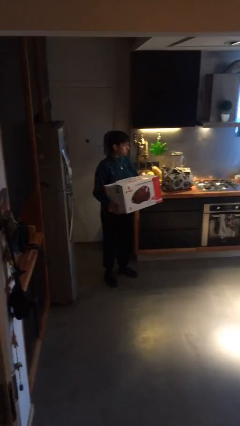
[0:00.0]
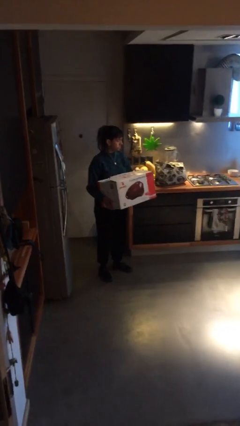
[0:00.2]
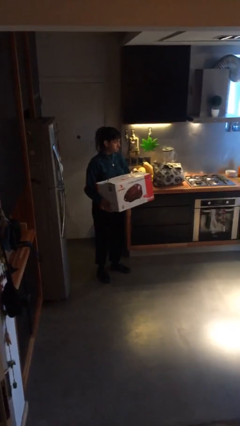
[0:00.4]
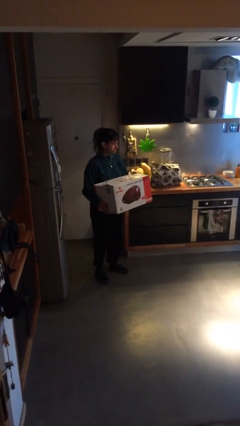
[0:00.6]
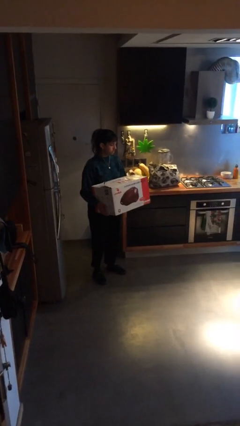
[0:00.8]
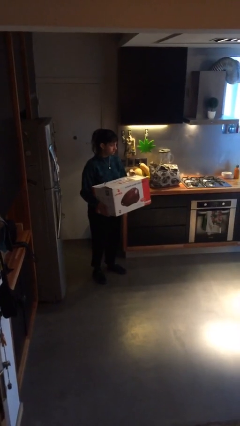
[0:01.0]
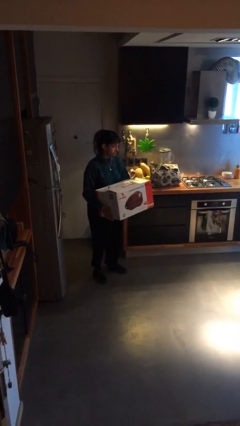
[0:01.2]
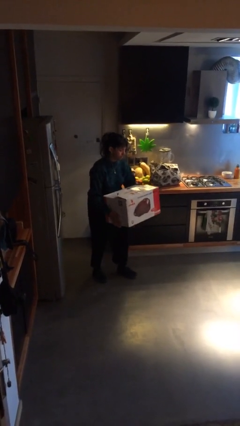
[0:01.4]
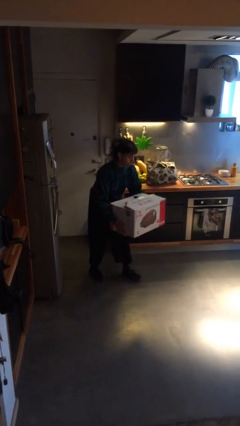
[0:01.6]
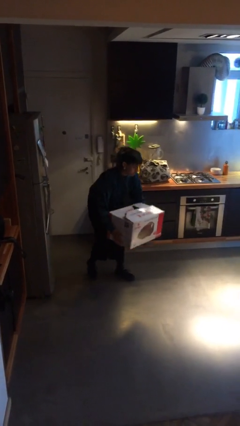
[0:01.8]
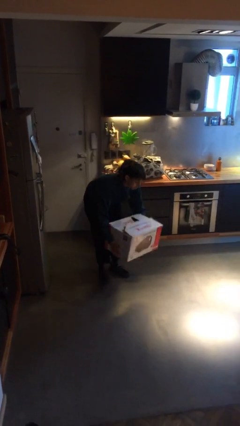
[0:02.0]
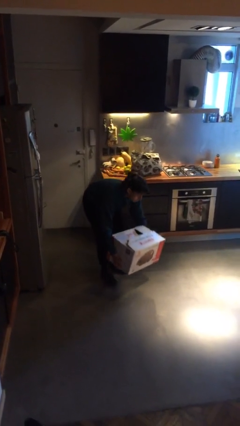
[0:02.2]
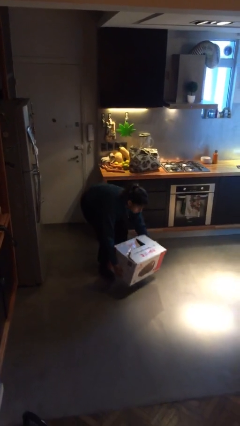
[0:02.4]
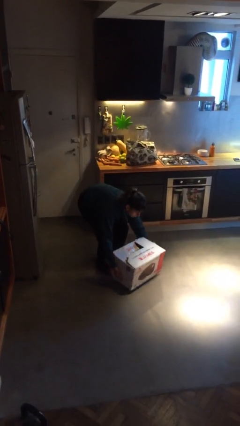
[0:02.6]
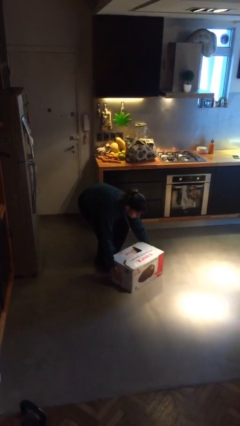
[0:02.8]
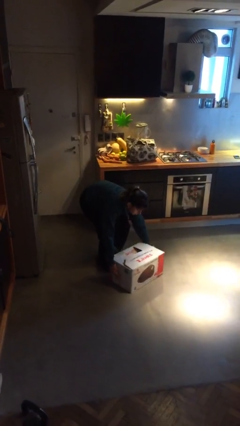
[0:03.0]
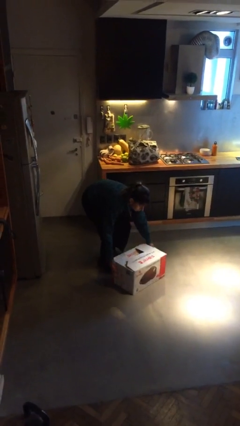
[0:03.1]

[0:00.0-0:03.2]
person puts down object on floor

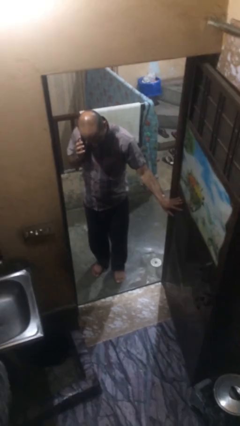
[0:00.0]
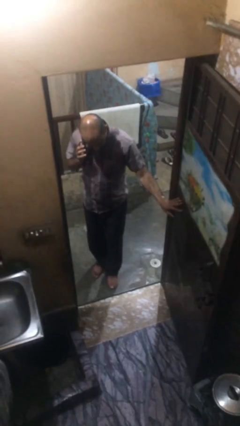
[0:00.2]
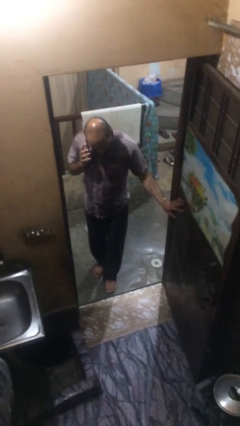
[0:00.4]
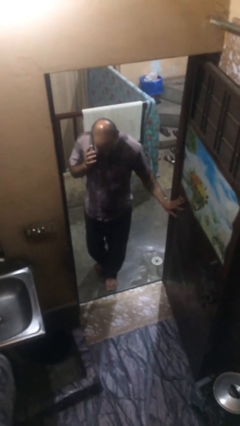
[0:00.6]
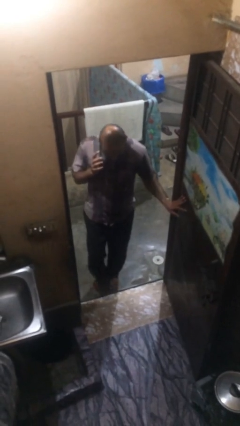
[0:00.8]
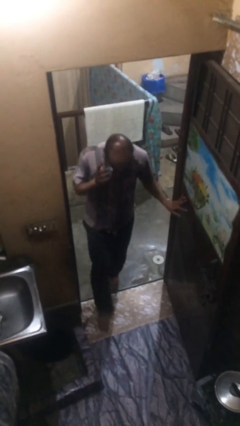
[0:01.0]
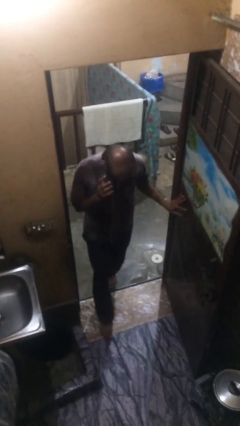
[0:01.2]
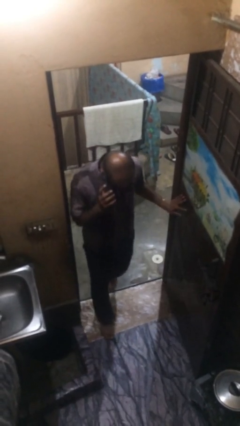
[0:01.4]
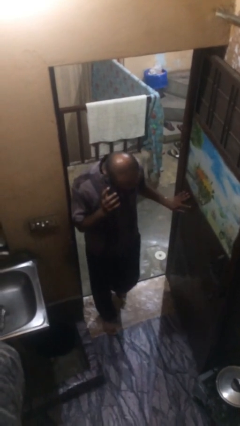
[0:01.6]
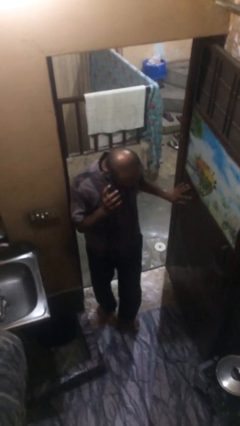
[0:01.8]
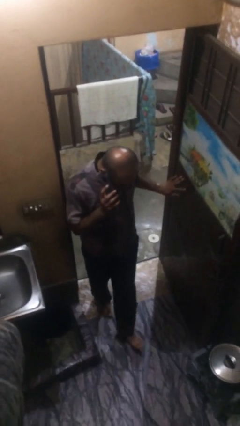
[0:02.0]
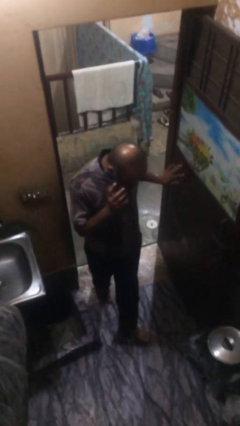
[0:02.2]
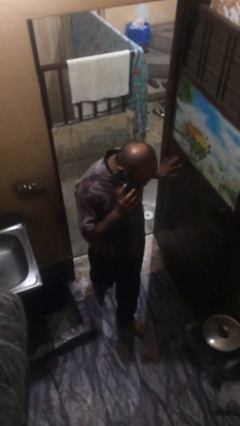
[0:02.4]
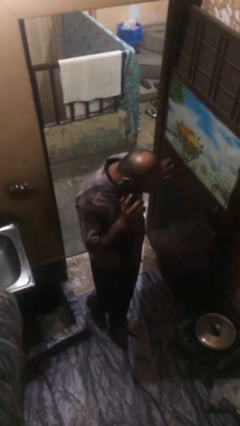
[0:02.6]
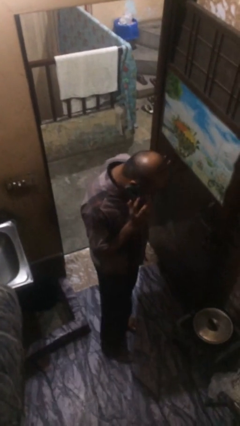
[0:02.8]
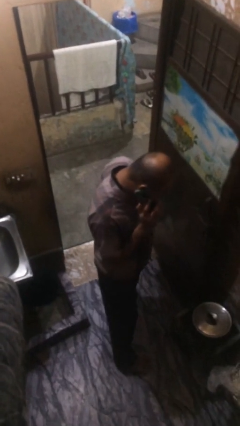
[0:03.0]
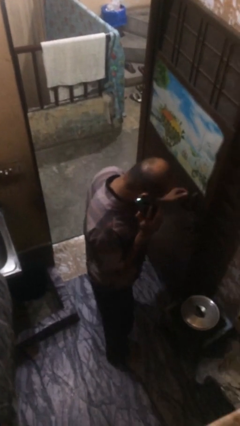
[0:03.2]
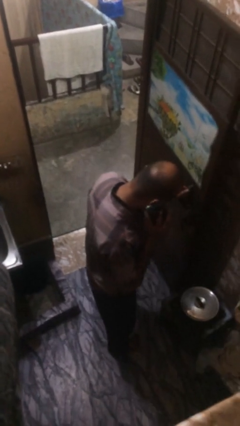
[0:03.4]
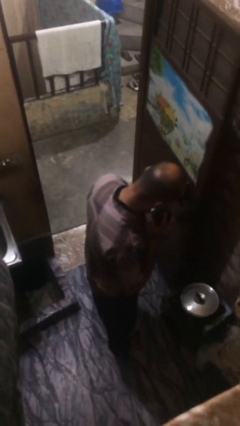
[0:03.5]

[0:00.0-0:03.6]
person enters scene through structure

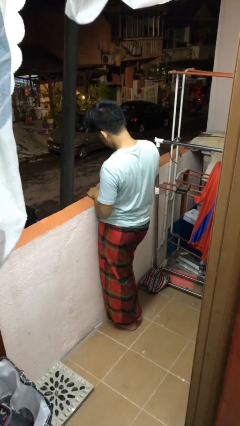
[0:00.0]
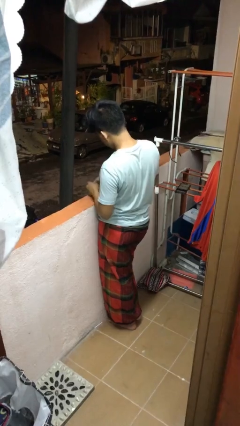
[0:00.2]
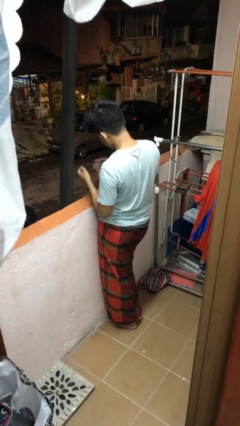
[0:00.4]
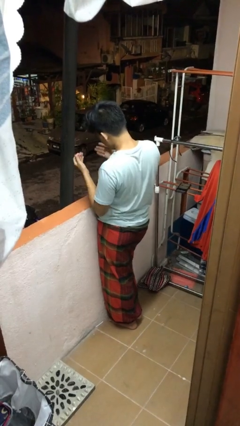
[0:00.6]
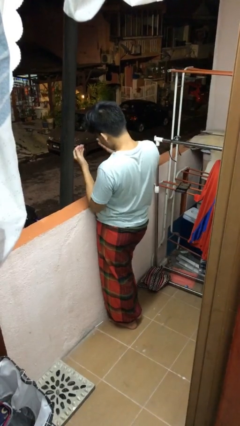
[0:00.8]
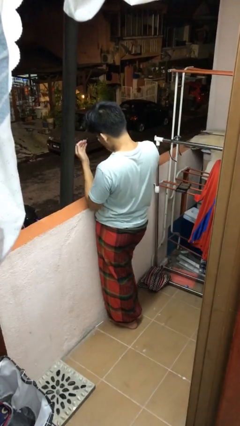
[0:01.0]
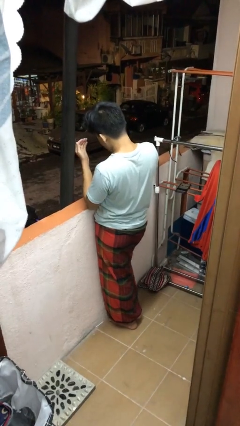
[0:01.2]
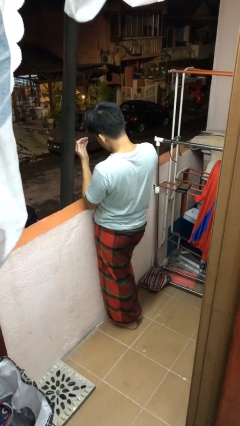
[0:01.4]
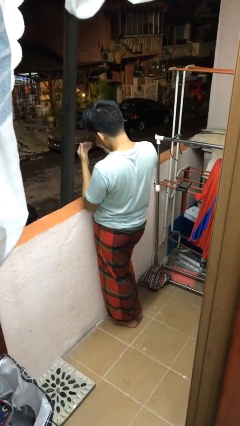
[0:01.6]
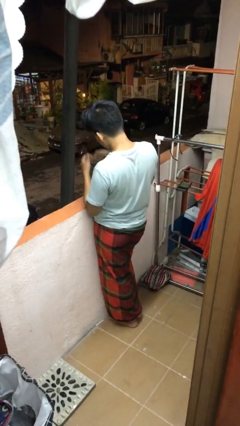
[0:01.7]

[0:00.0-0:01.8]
person prays

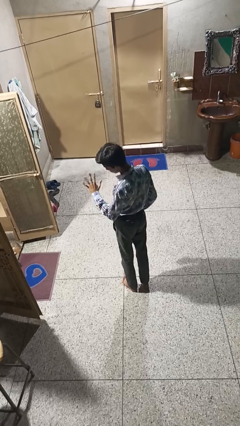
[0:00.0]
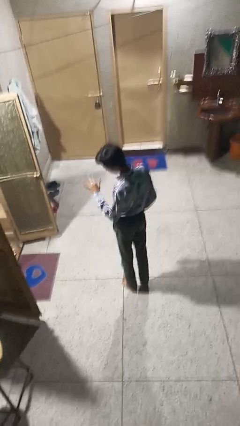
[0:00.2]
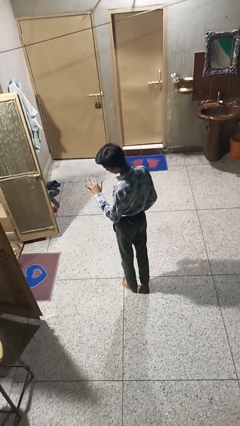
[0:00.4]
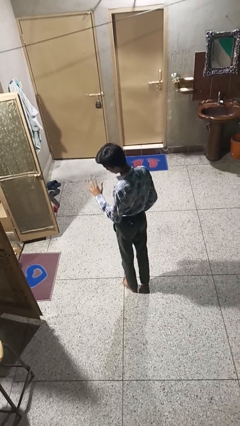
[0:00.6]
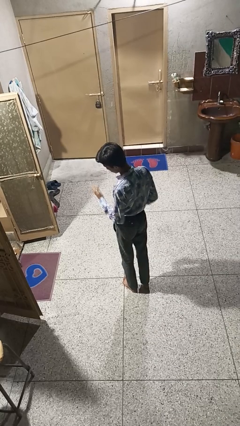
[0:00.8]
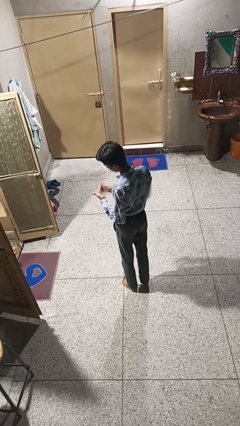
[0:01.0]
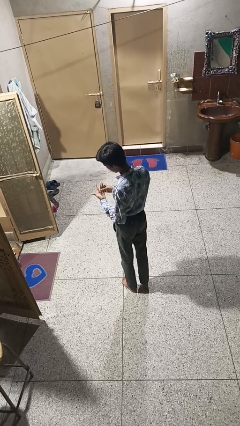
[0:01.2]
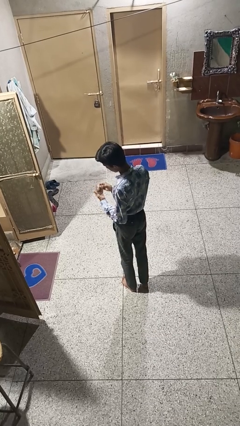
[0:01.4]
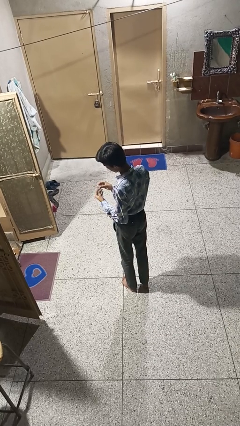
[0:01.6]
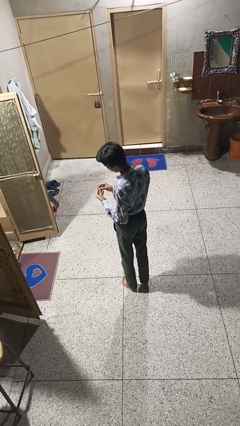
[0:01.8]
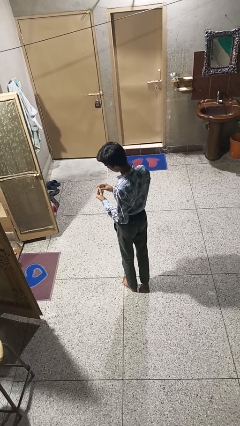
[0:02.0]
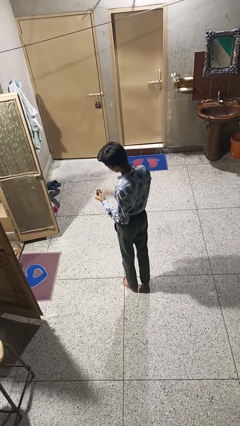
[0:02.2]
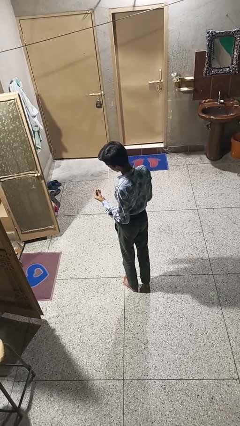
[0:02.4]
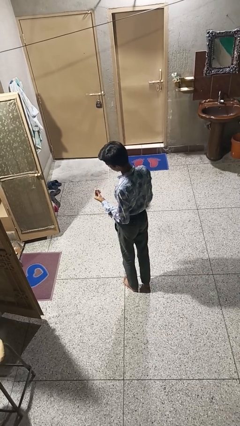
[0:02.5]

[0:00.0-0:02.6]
person takes off ring

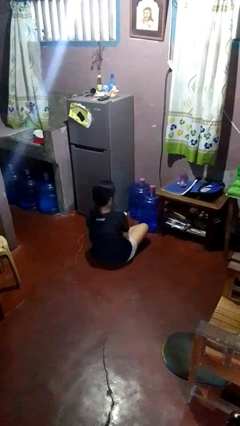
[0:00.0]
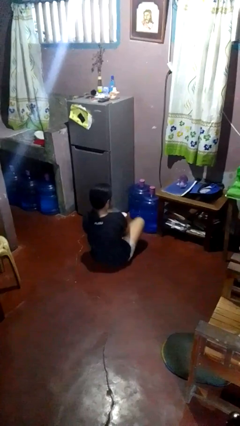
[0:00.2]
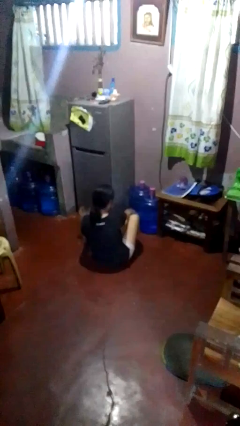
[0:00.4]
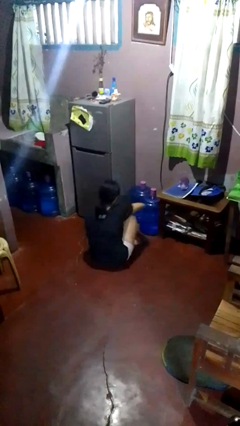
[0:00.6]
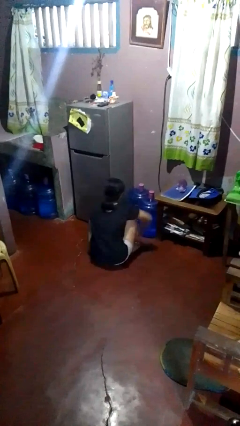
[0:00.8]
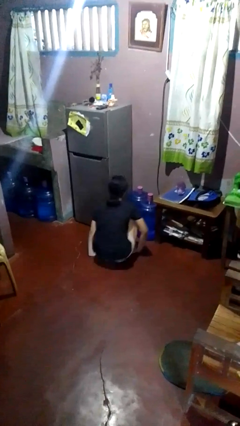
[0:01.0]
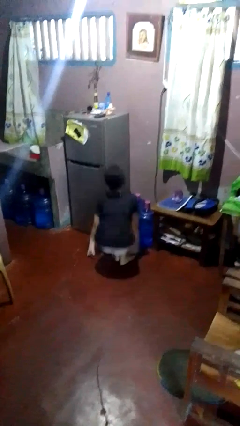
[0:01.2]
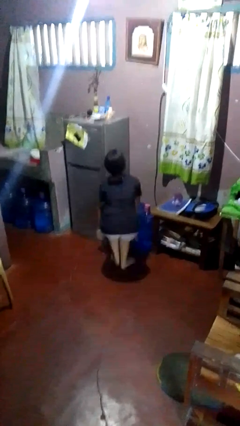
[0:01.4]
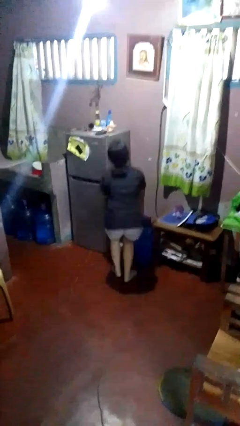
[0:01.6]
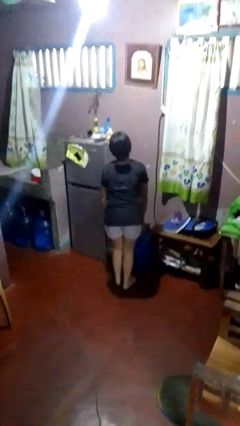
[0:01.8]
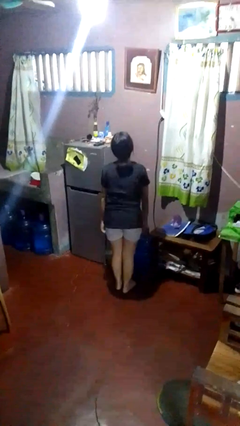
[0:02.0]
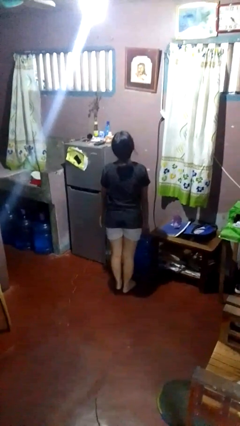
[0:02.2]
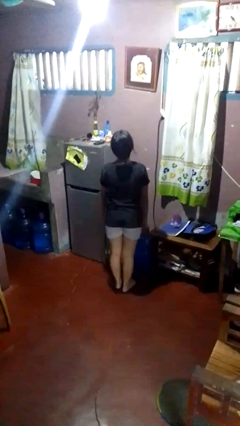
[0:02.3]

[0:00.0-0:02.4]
person stands up from floor

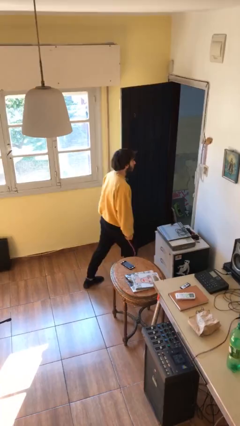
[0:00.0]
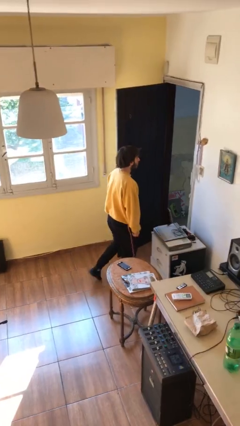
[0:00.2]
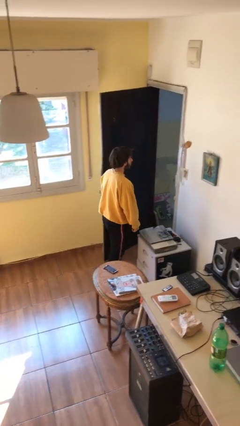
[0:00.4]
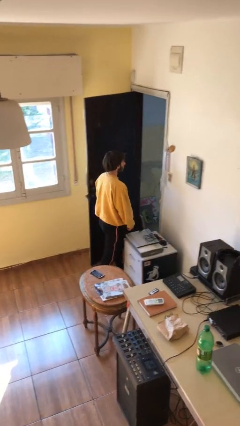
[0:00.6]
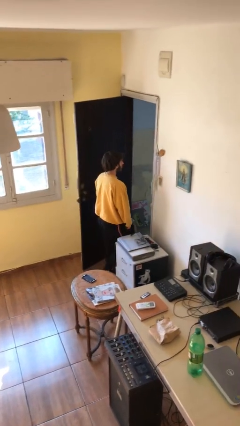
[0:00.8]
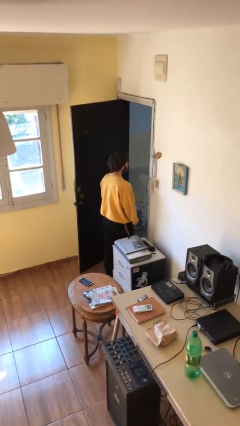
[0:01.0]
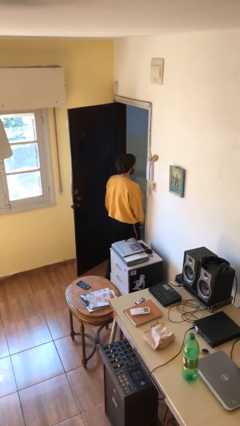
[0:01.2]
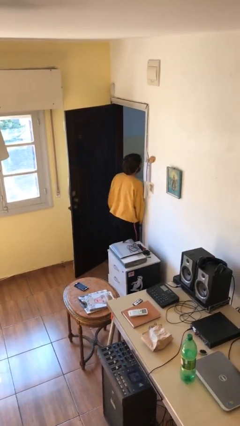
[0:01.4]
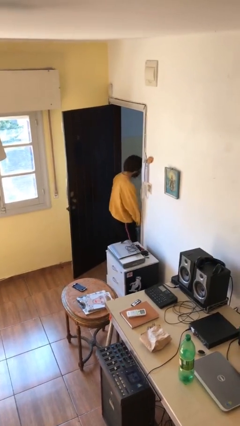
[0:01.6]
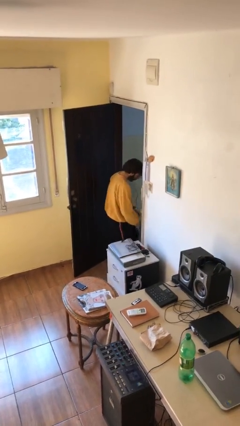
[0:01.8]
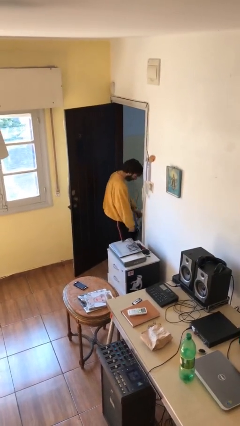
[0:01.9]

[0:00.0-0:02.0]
person bumps into wall

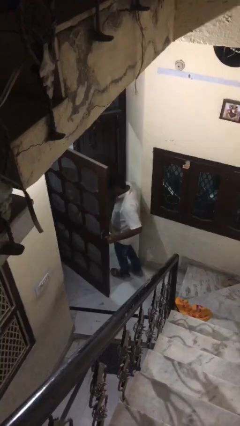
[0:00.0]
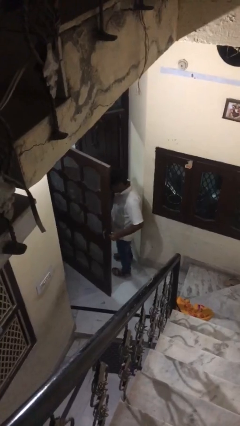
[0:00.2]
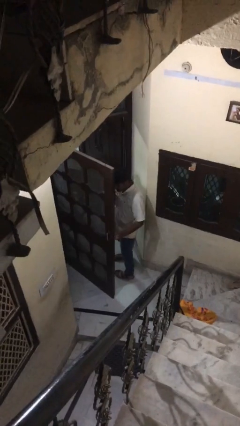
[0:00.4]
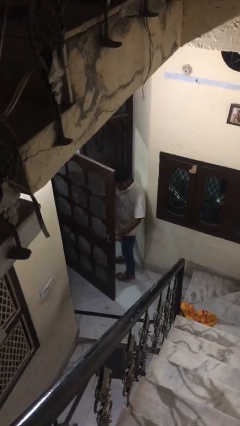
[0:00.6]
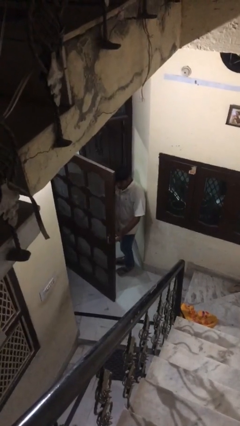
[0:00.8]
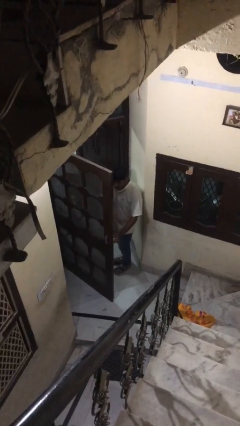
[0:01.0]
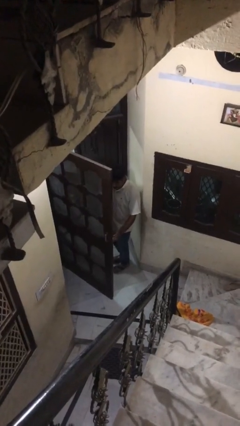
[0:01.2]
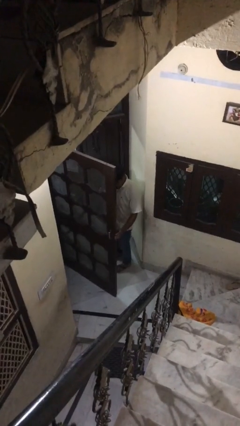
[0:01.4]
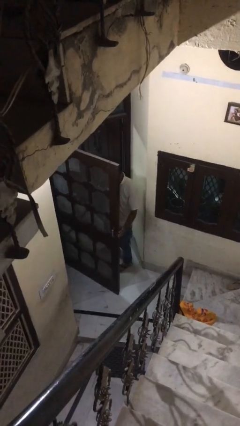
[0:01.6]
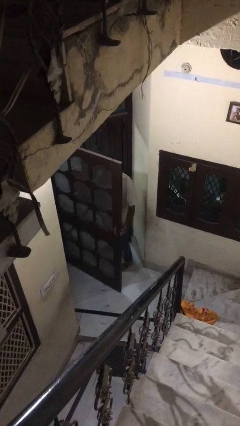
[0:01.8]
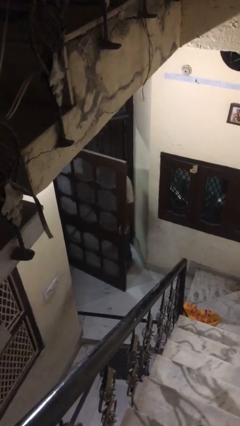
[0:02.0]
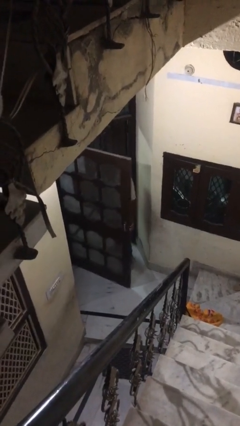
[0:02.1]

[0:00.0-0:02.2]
person exits scene through structure
